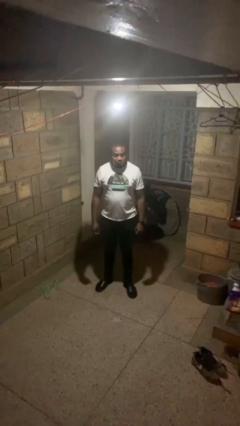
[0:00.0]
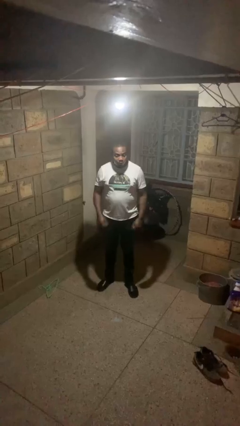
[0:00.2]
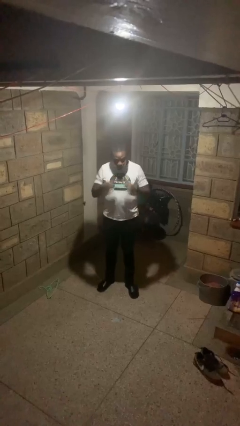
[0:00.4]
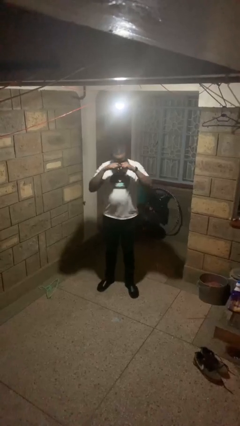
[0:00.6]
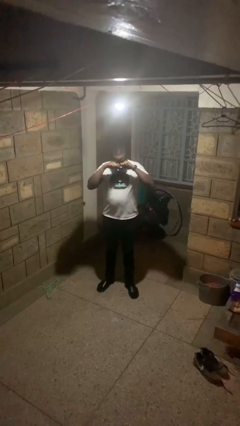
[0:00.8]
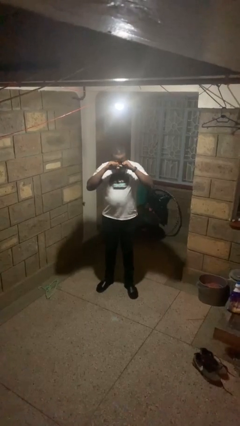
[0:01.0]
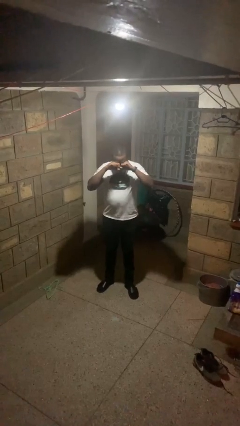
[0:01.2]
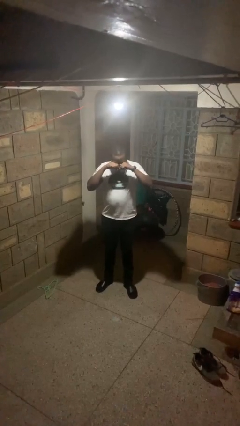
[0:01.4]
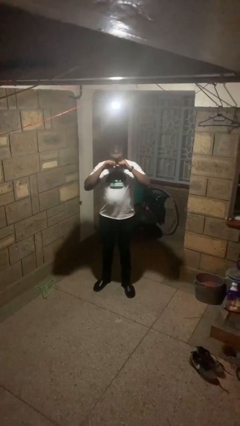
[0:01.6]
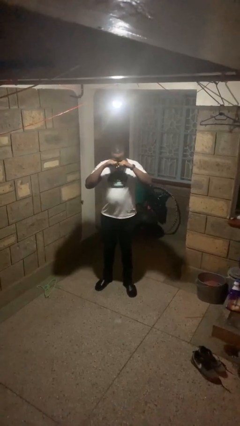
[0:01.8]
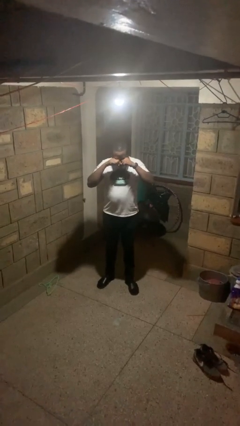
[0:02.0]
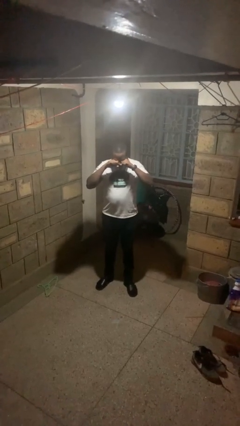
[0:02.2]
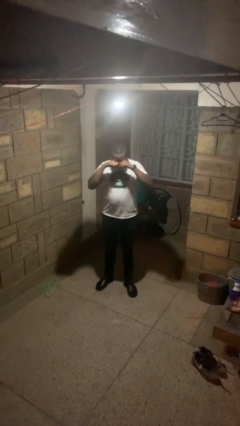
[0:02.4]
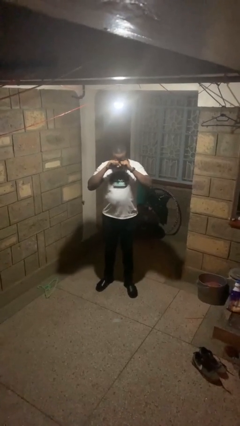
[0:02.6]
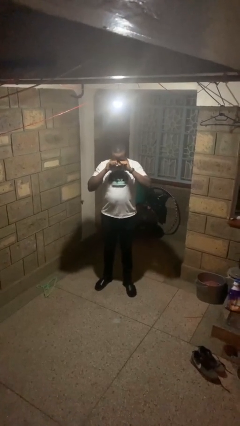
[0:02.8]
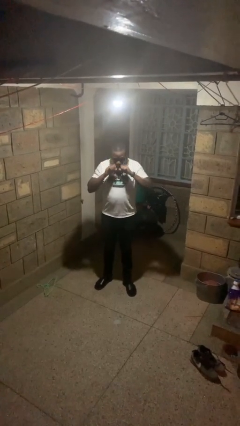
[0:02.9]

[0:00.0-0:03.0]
person rubs eyes

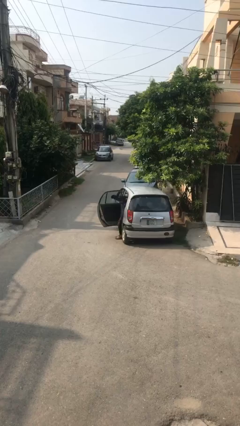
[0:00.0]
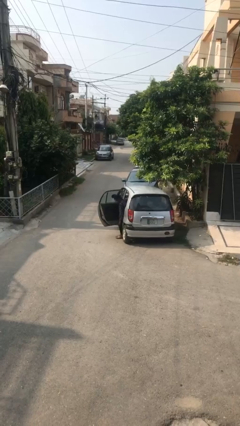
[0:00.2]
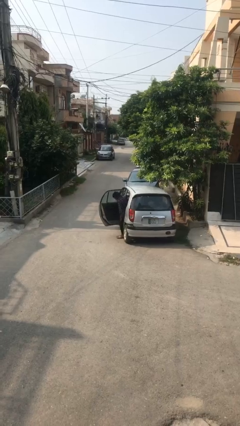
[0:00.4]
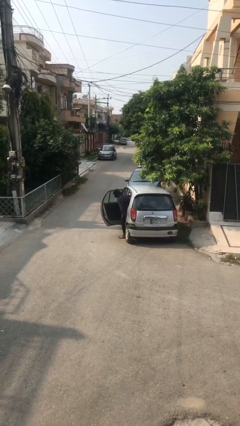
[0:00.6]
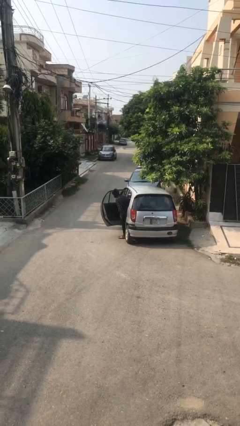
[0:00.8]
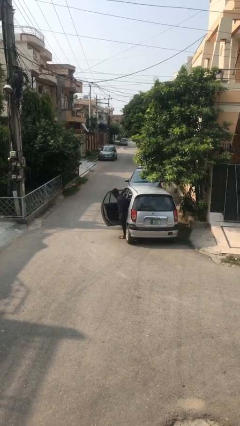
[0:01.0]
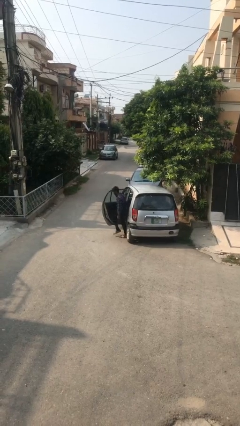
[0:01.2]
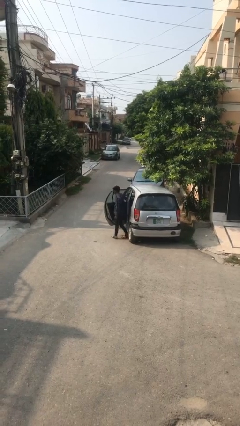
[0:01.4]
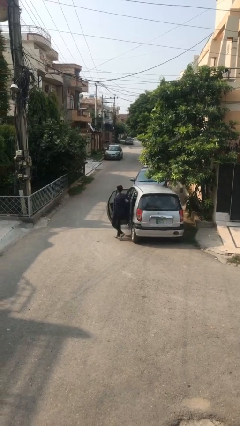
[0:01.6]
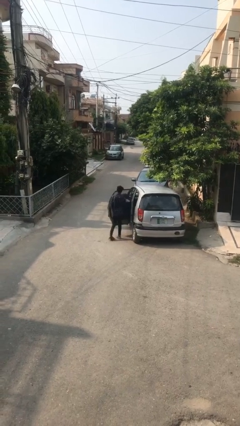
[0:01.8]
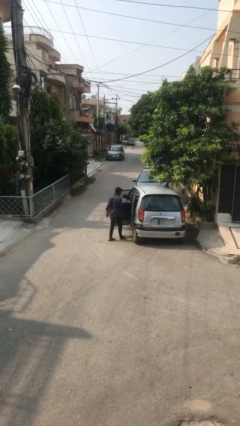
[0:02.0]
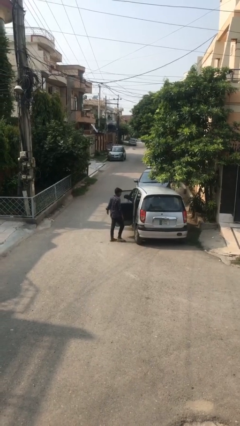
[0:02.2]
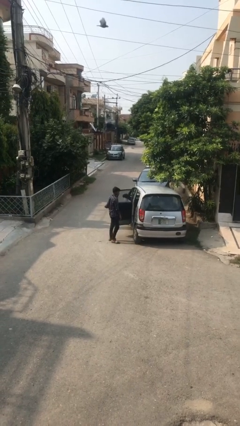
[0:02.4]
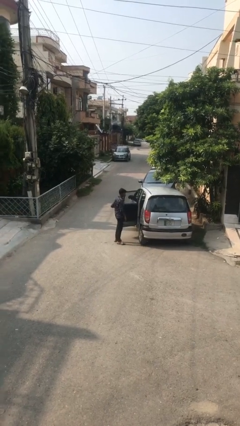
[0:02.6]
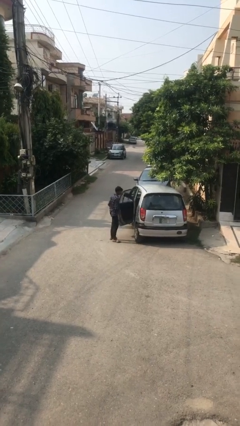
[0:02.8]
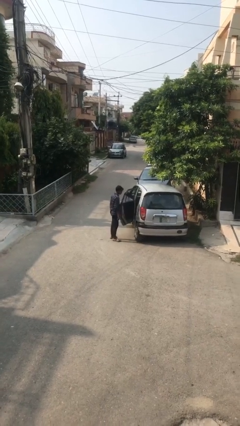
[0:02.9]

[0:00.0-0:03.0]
person exits car

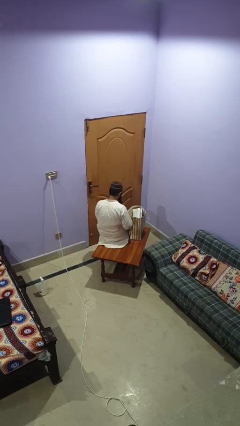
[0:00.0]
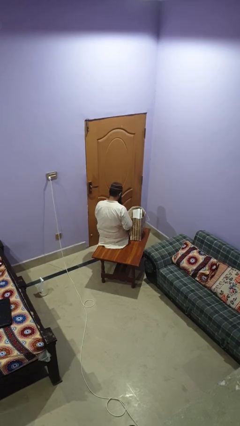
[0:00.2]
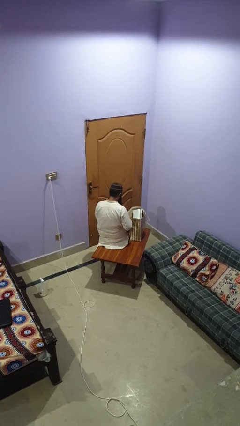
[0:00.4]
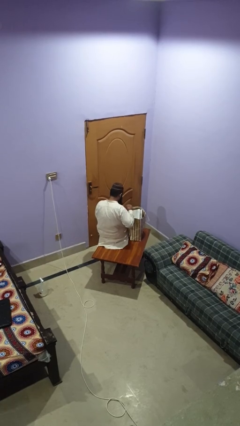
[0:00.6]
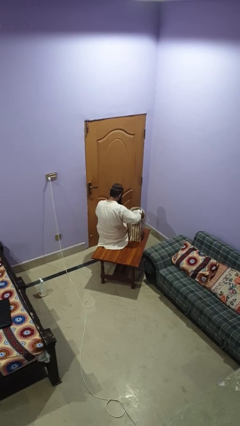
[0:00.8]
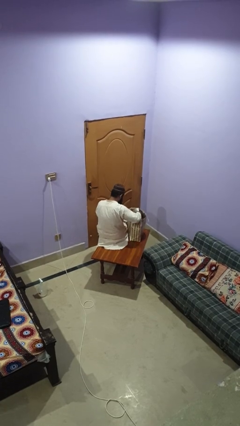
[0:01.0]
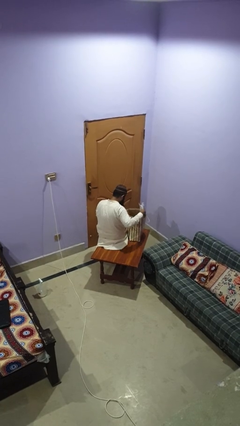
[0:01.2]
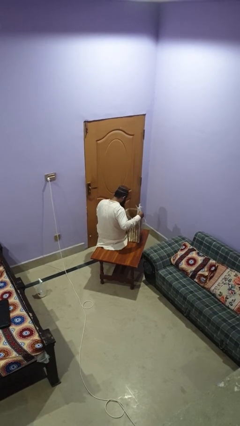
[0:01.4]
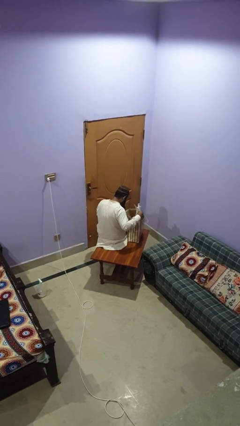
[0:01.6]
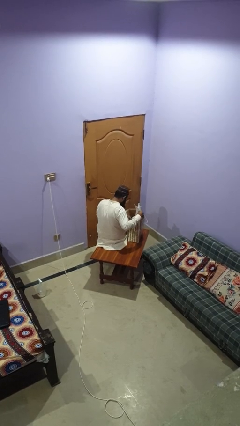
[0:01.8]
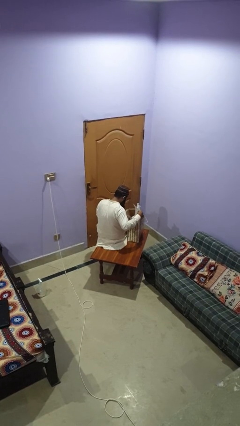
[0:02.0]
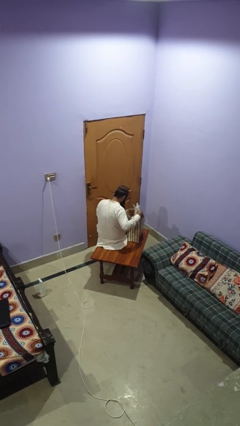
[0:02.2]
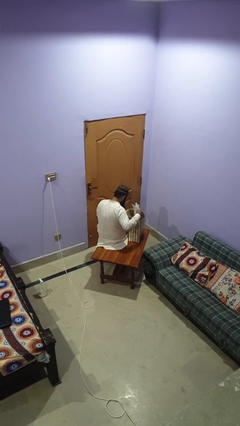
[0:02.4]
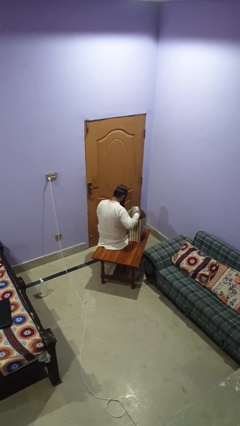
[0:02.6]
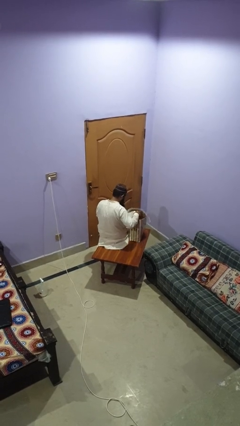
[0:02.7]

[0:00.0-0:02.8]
person searches in bag
